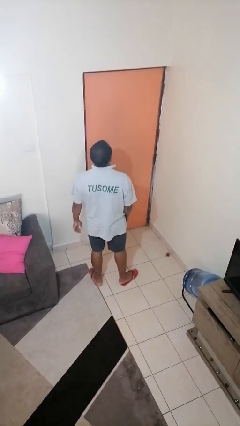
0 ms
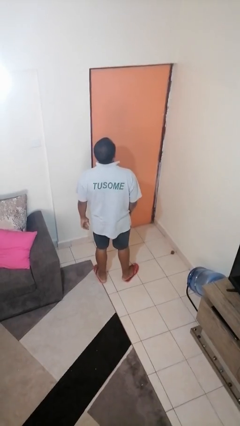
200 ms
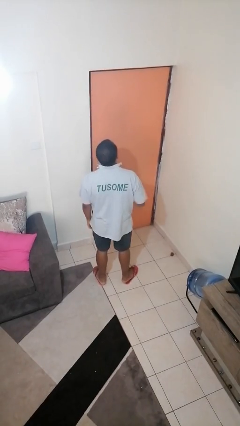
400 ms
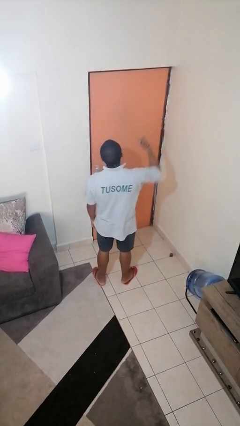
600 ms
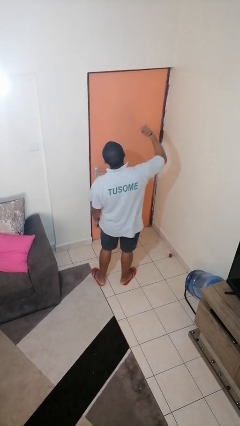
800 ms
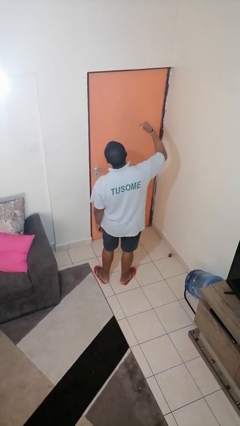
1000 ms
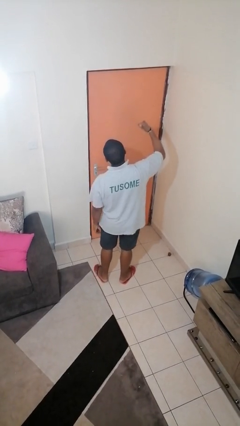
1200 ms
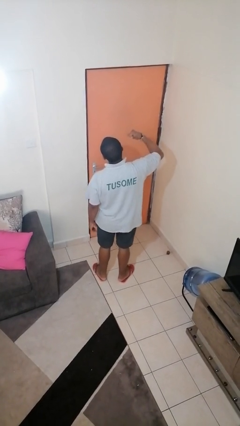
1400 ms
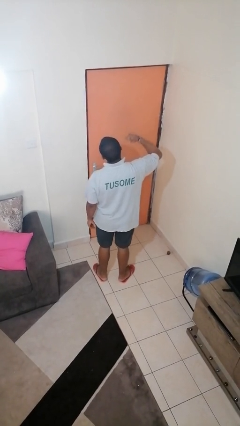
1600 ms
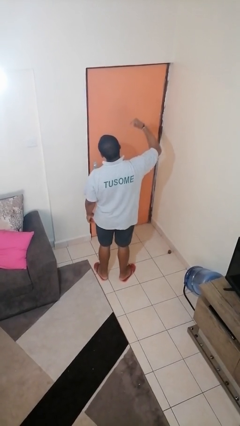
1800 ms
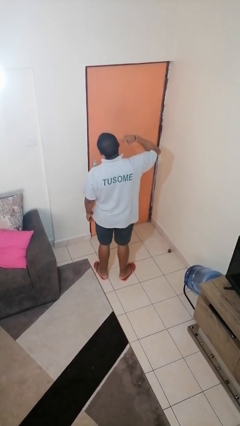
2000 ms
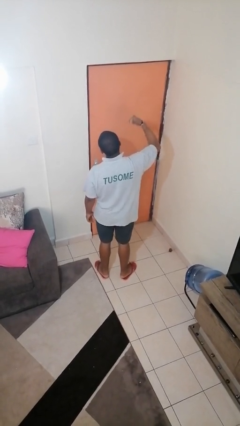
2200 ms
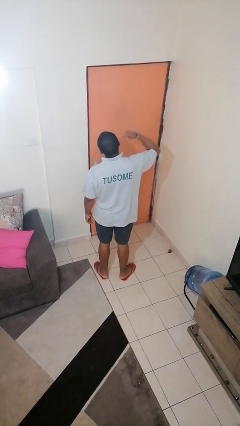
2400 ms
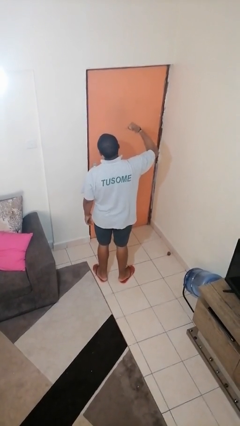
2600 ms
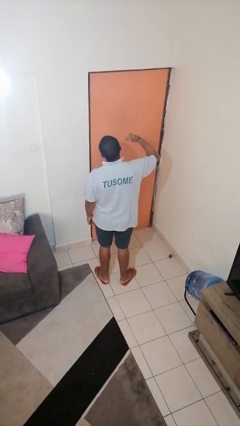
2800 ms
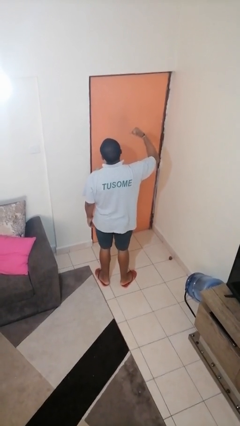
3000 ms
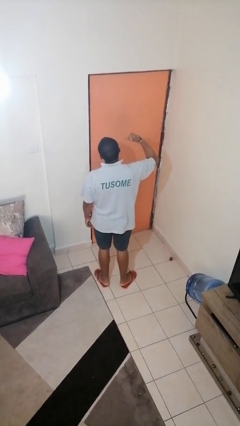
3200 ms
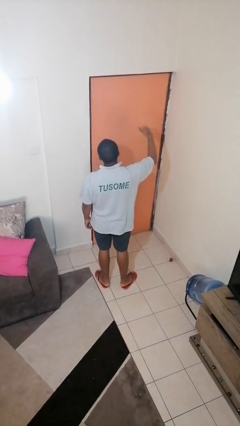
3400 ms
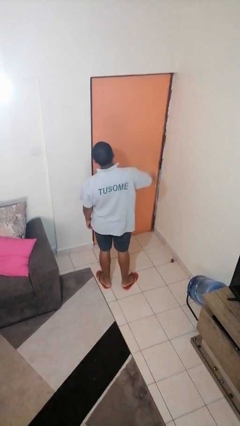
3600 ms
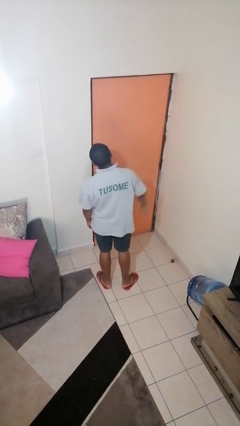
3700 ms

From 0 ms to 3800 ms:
person gestures call me

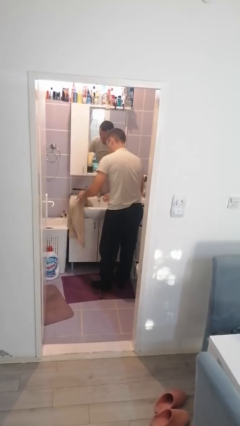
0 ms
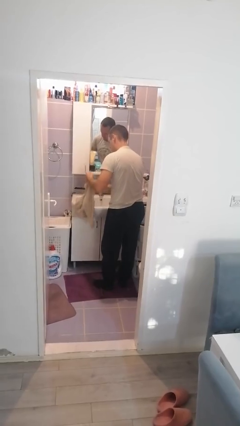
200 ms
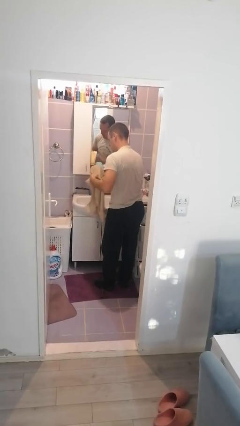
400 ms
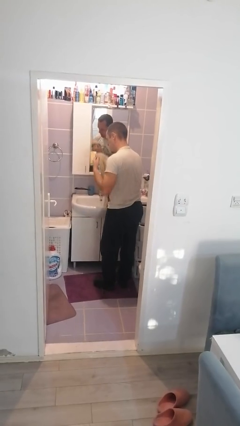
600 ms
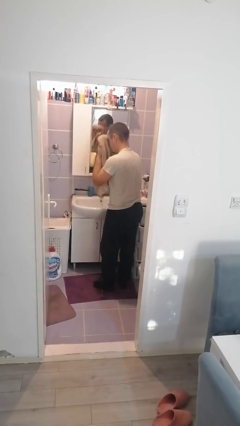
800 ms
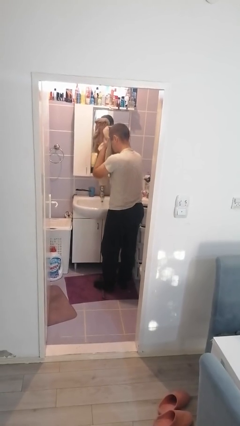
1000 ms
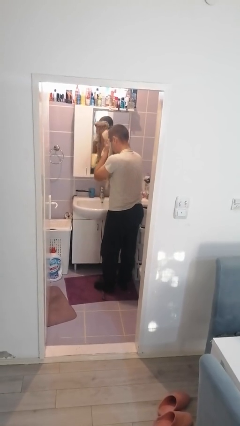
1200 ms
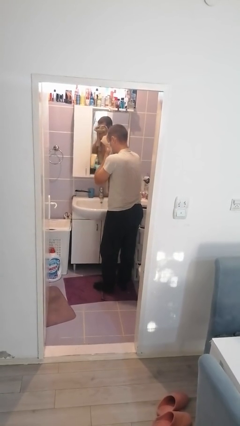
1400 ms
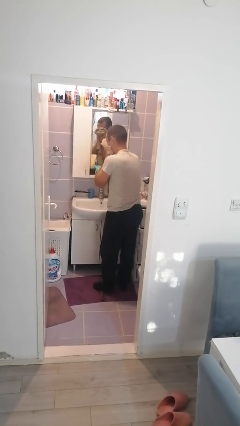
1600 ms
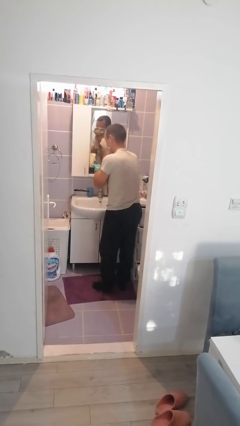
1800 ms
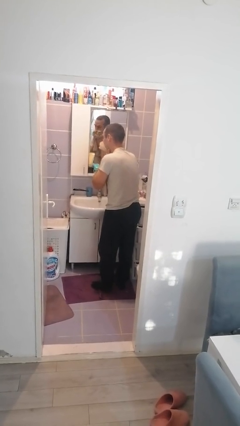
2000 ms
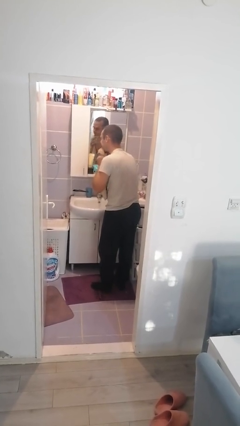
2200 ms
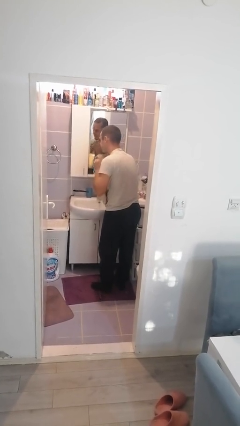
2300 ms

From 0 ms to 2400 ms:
person dries face with towel

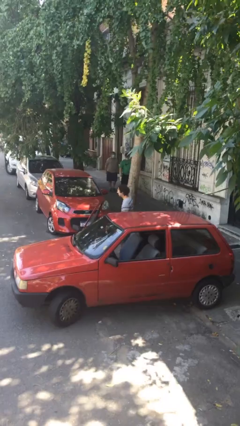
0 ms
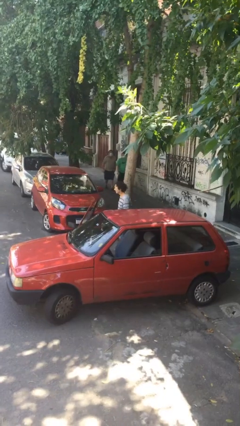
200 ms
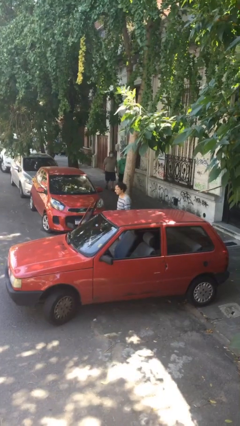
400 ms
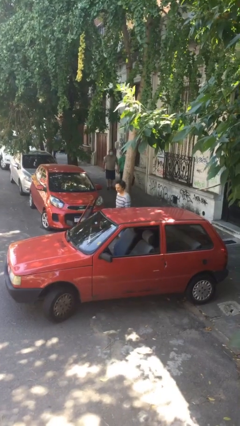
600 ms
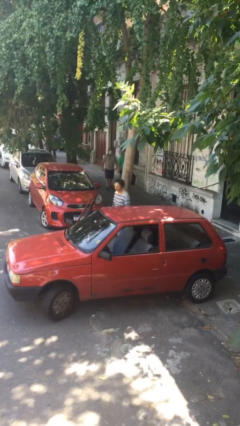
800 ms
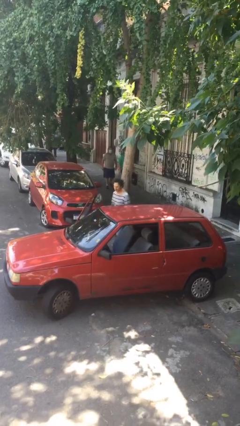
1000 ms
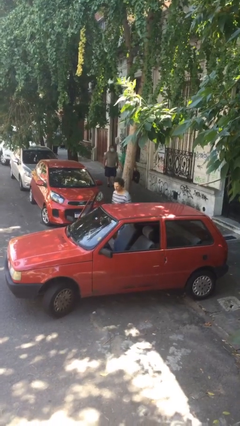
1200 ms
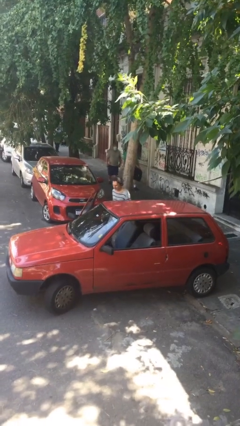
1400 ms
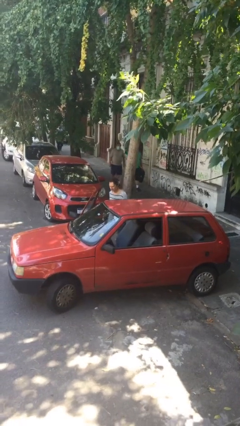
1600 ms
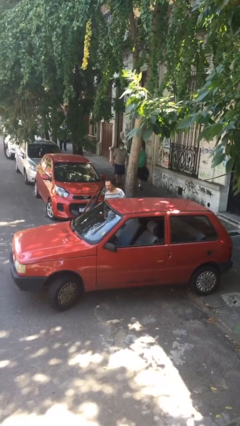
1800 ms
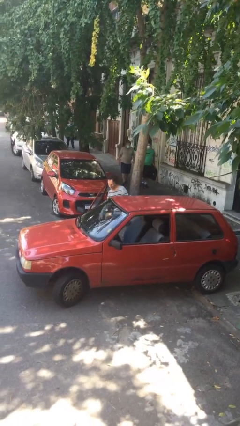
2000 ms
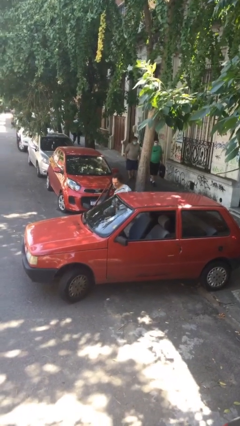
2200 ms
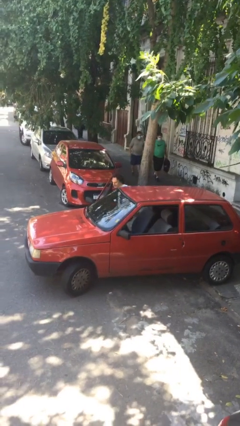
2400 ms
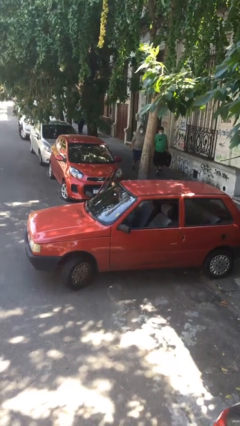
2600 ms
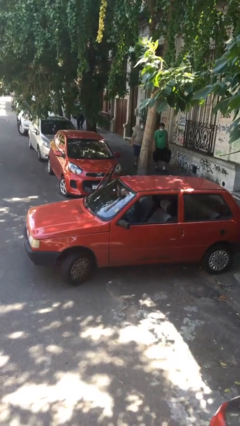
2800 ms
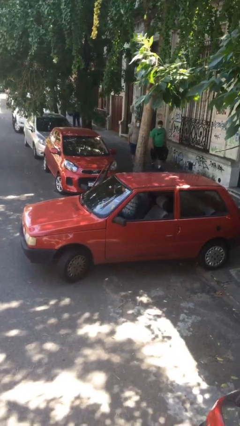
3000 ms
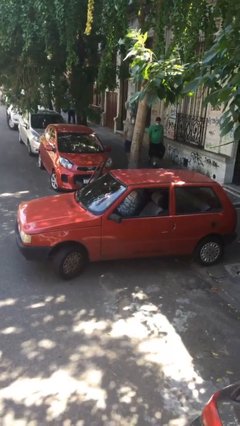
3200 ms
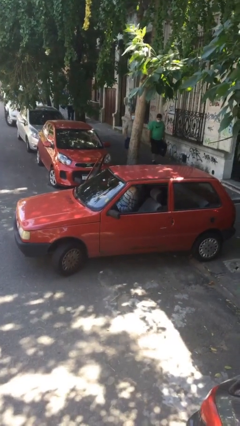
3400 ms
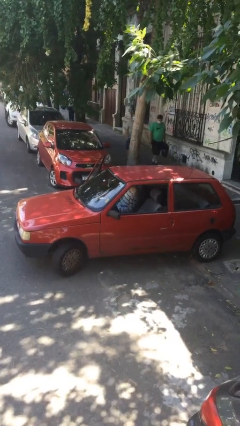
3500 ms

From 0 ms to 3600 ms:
person enters car

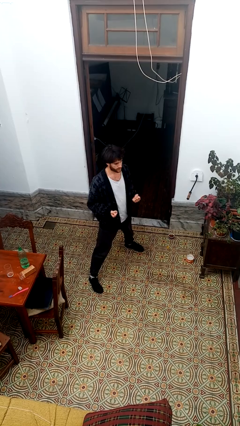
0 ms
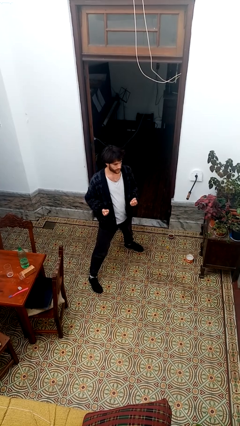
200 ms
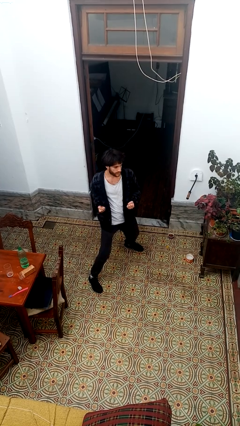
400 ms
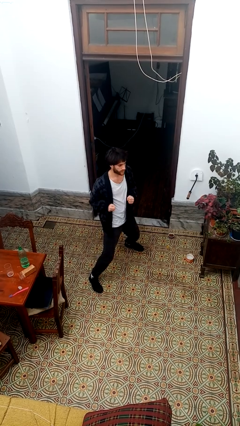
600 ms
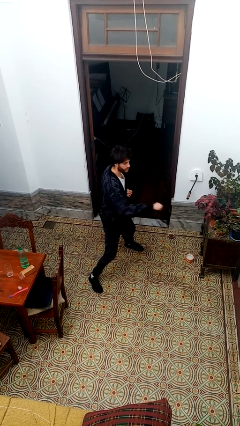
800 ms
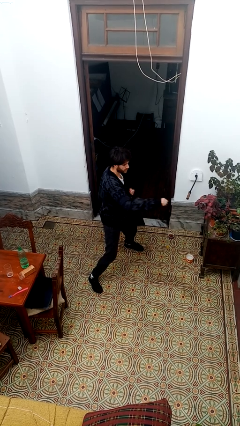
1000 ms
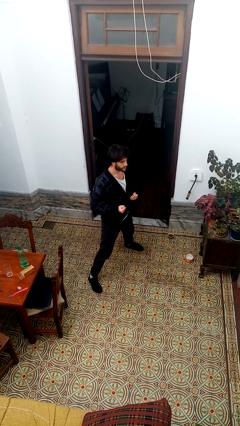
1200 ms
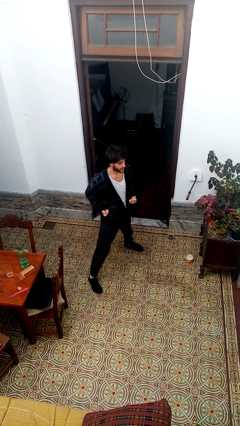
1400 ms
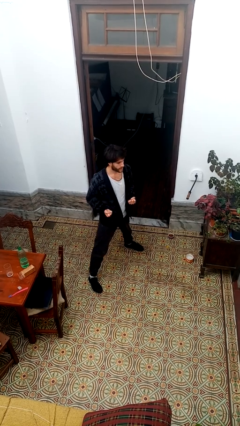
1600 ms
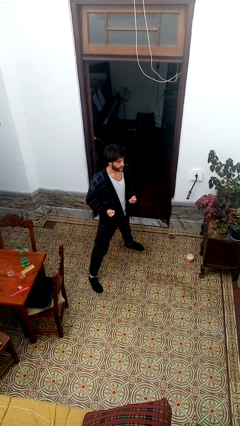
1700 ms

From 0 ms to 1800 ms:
person punches

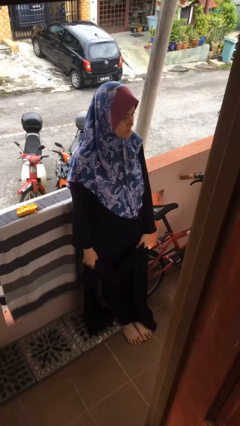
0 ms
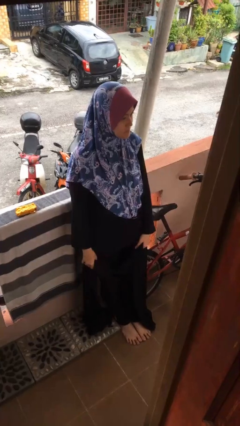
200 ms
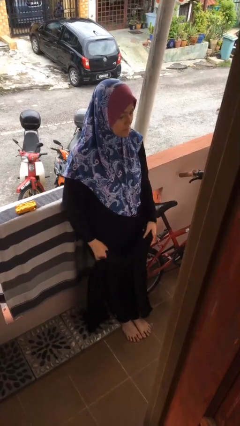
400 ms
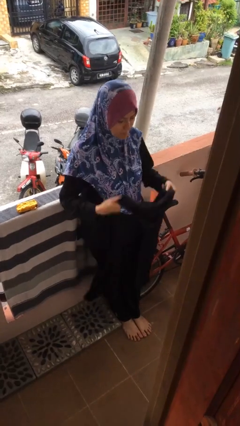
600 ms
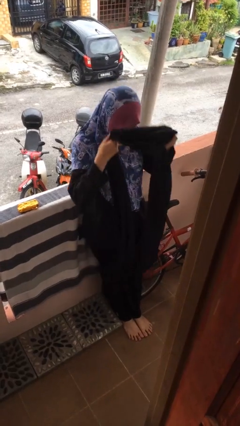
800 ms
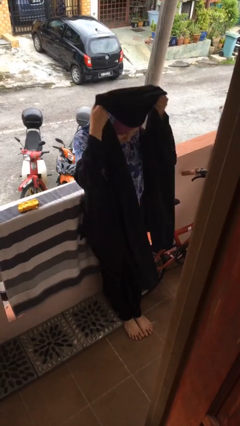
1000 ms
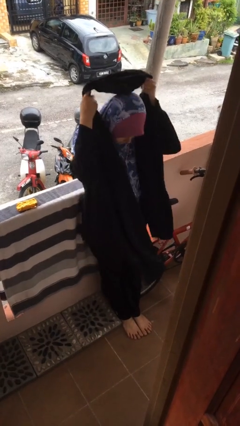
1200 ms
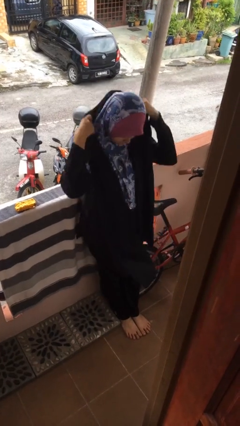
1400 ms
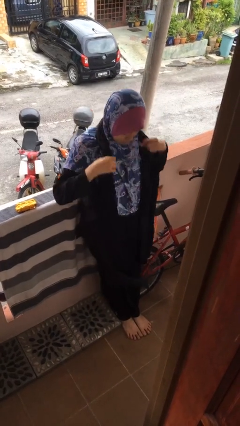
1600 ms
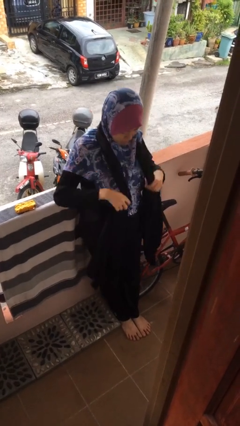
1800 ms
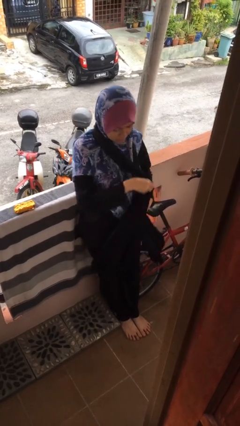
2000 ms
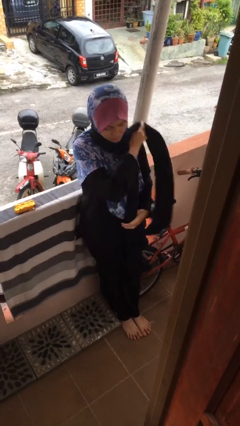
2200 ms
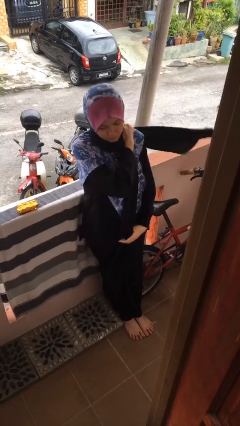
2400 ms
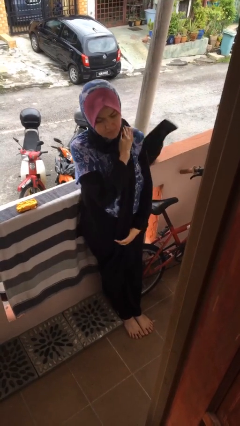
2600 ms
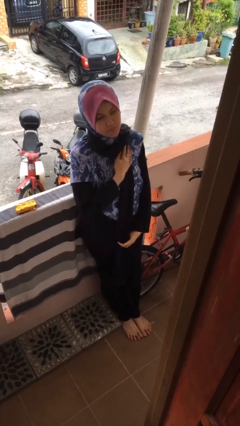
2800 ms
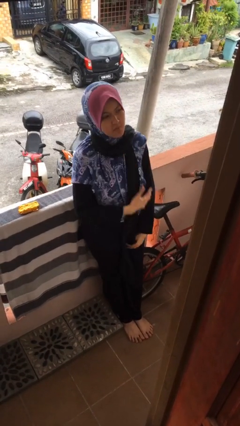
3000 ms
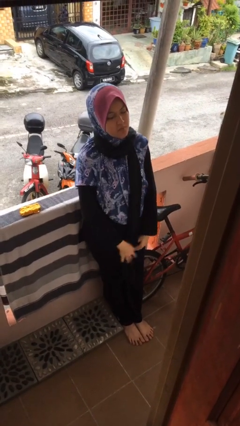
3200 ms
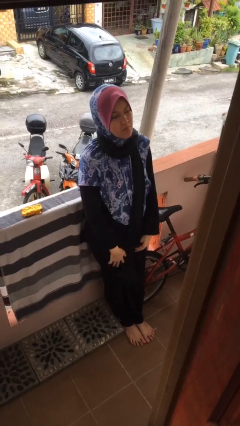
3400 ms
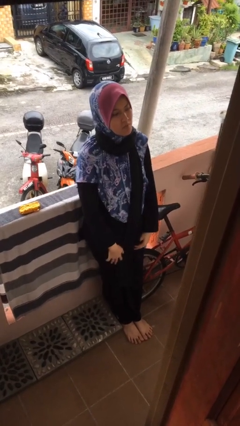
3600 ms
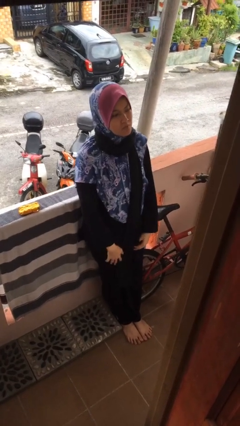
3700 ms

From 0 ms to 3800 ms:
person puts on scarf

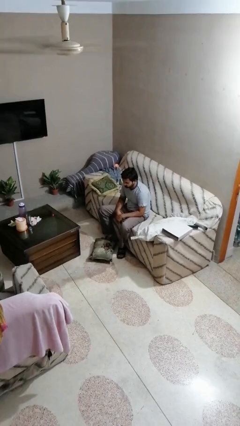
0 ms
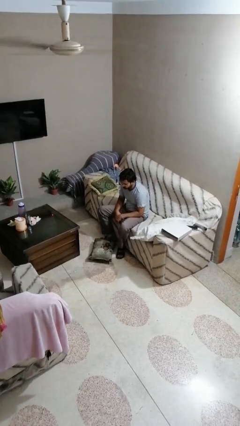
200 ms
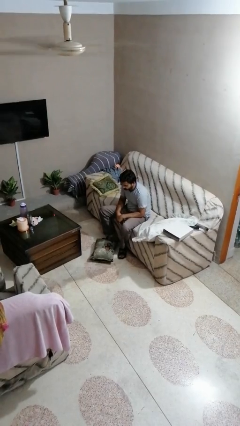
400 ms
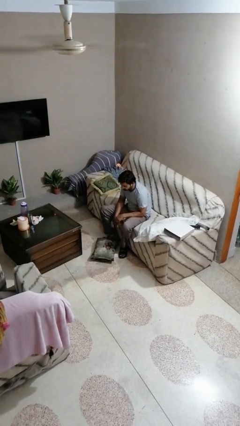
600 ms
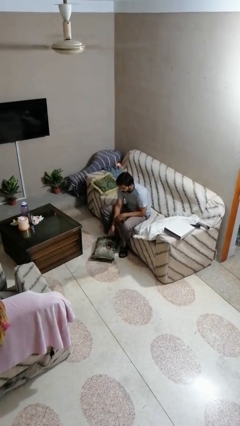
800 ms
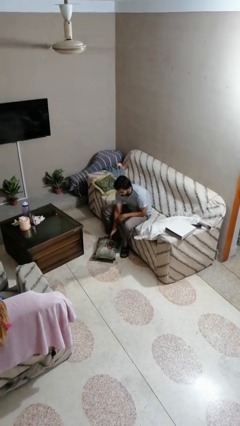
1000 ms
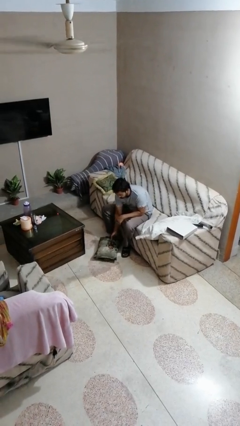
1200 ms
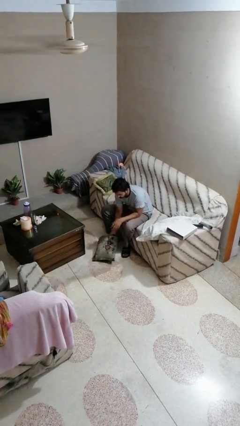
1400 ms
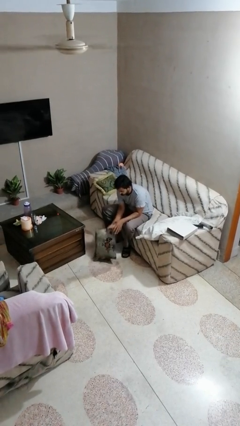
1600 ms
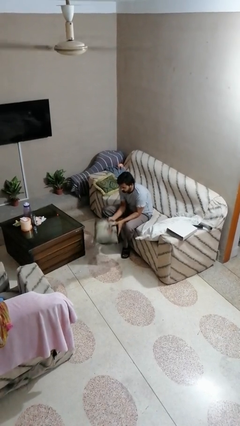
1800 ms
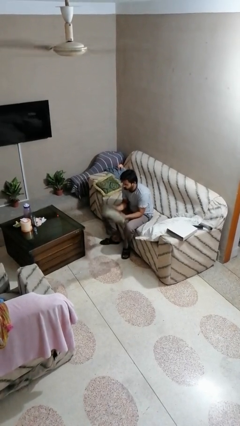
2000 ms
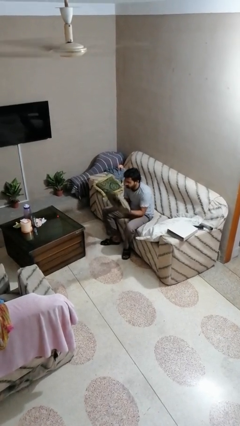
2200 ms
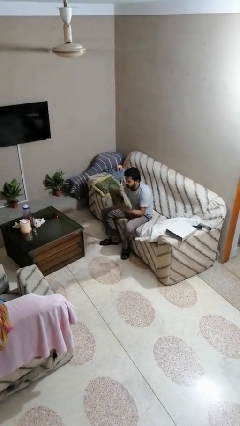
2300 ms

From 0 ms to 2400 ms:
person picks up object from floor

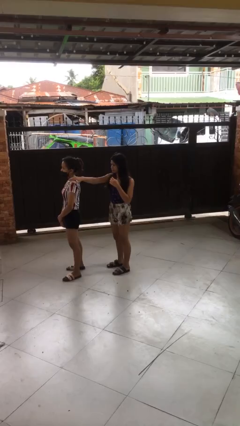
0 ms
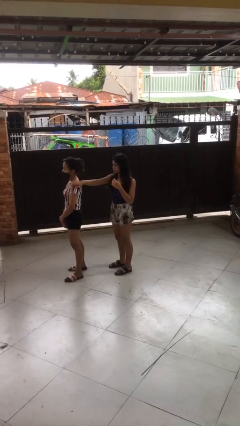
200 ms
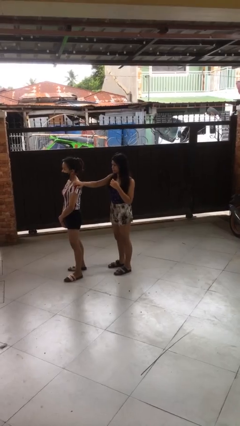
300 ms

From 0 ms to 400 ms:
person grabs person by shoulder
